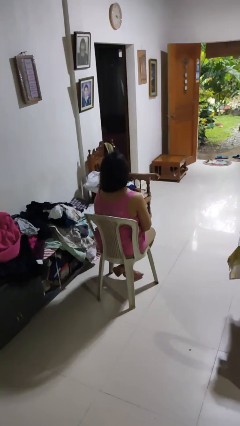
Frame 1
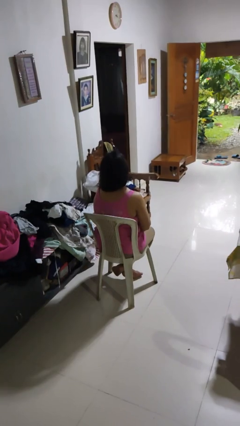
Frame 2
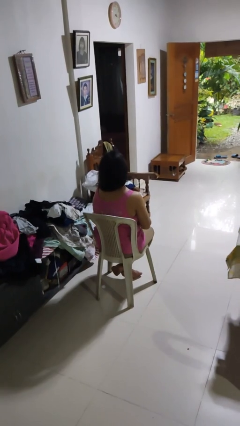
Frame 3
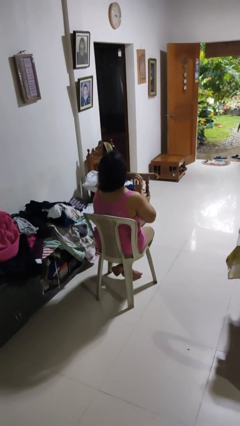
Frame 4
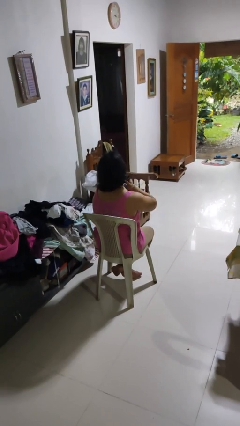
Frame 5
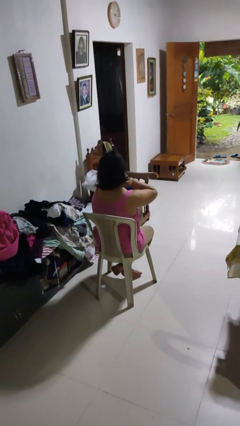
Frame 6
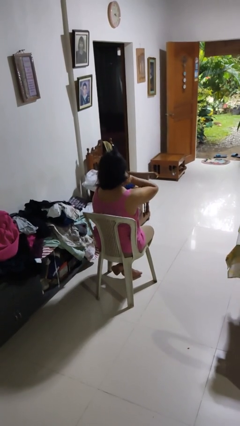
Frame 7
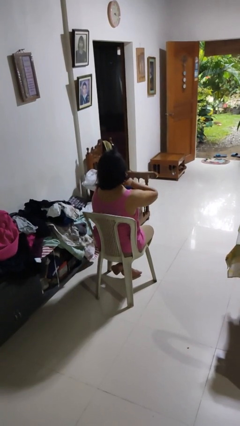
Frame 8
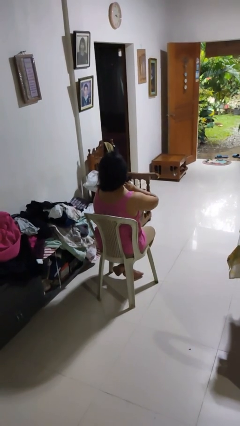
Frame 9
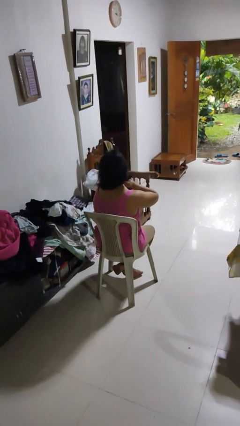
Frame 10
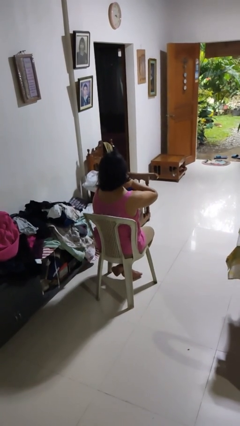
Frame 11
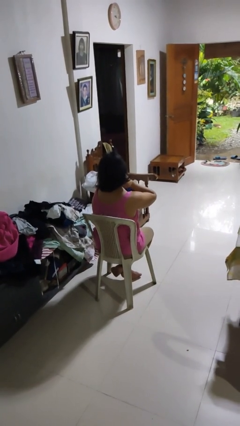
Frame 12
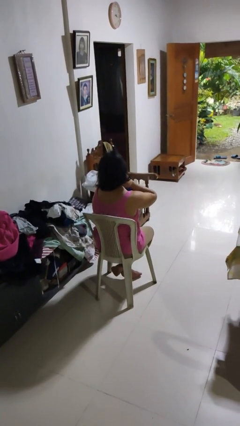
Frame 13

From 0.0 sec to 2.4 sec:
person rubs neck

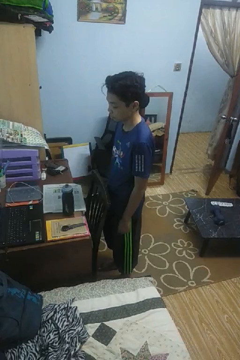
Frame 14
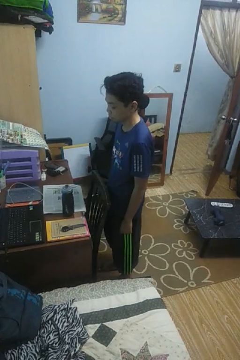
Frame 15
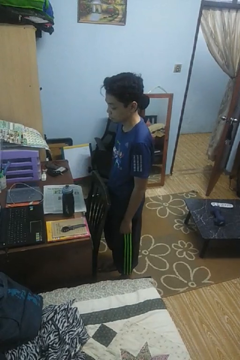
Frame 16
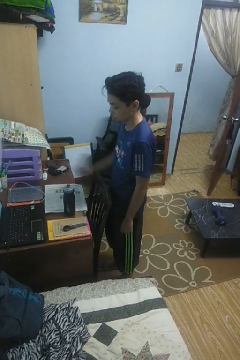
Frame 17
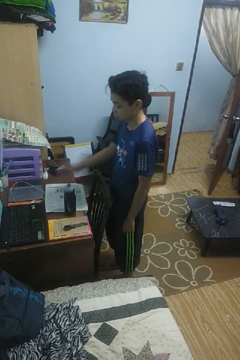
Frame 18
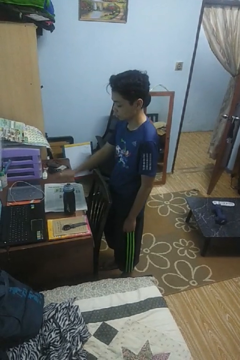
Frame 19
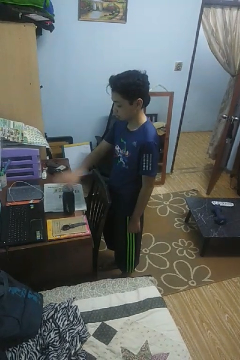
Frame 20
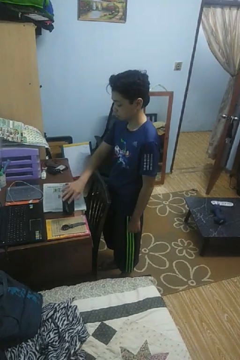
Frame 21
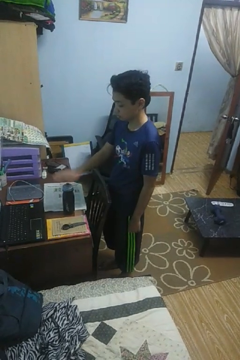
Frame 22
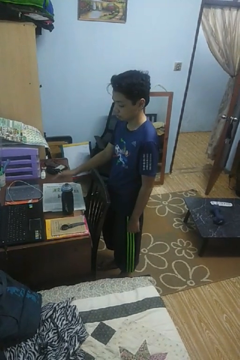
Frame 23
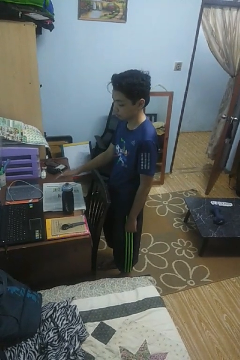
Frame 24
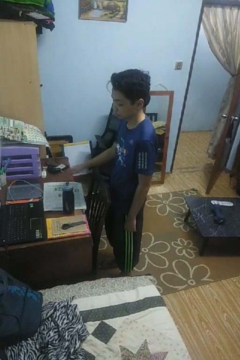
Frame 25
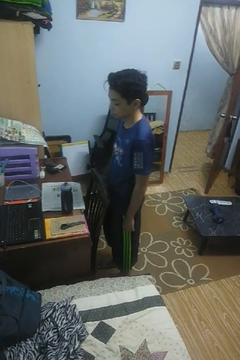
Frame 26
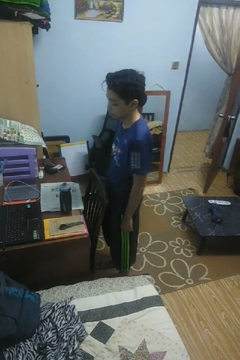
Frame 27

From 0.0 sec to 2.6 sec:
person waves hand over object

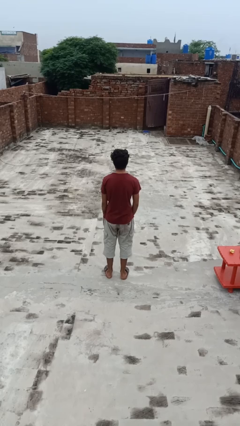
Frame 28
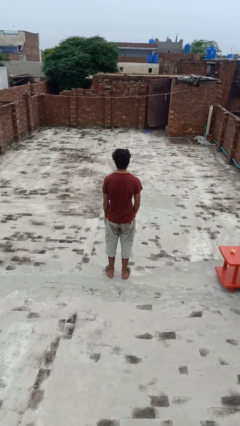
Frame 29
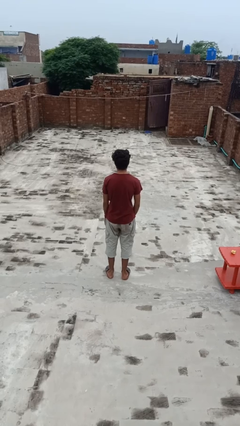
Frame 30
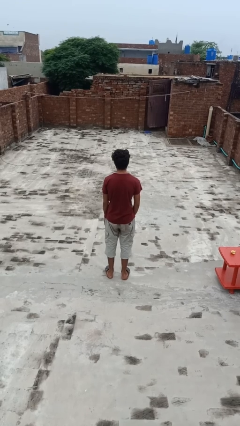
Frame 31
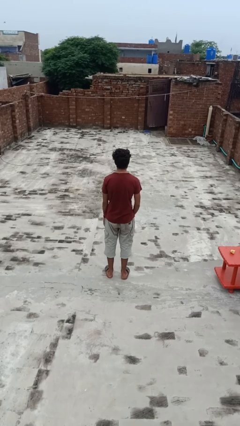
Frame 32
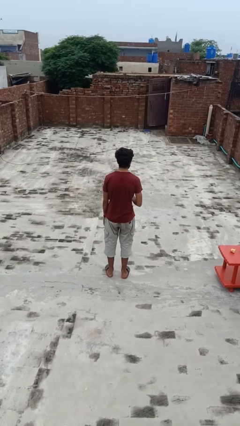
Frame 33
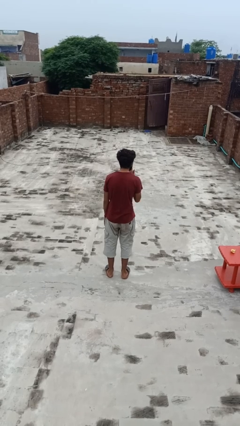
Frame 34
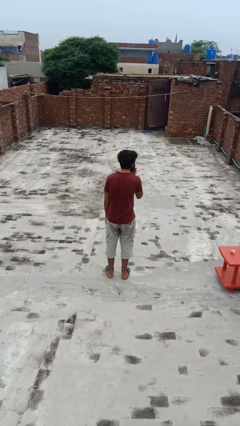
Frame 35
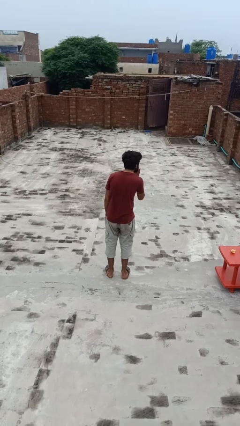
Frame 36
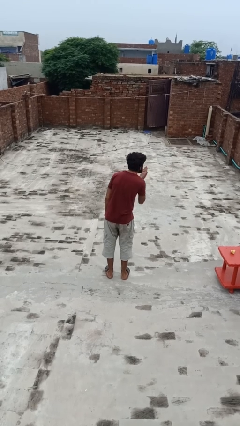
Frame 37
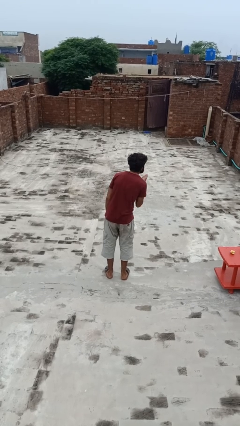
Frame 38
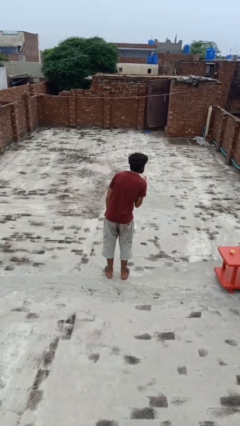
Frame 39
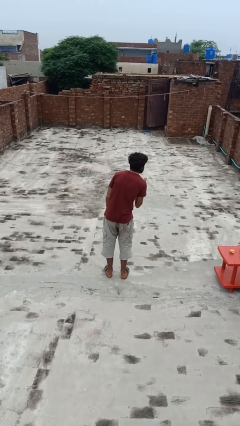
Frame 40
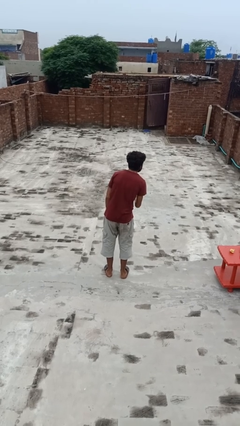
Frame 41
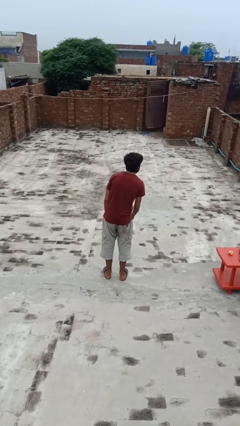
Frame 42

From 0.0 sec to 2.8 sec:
person gestures blow kiss

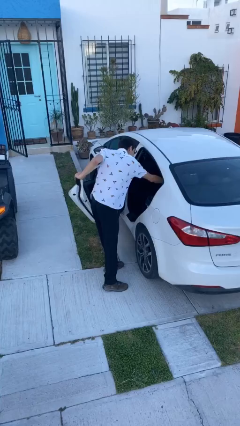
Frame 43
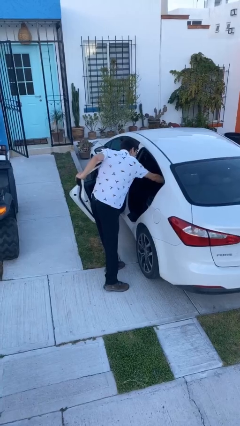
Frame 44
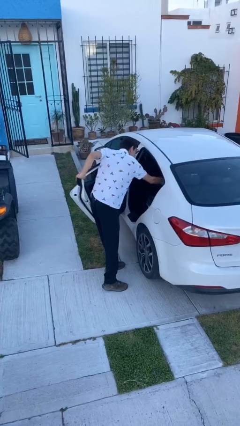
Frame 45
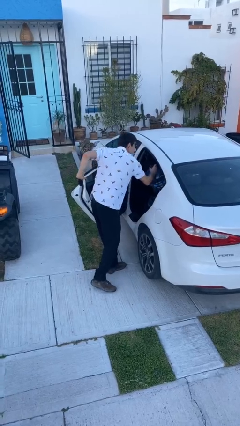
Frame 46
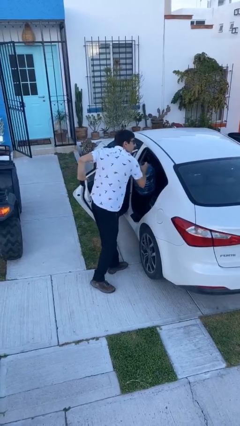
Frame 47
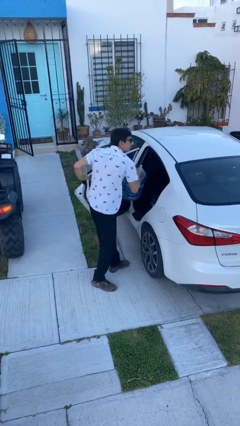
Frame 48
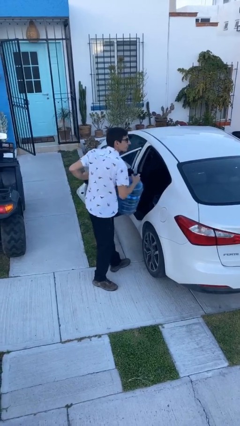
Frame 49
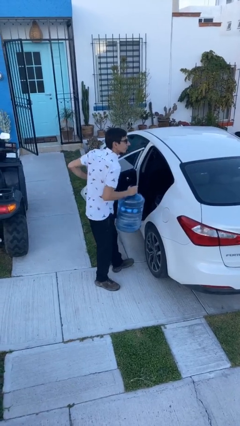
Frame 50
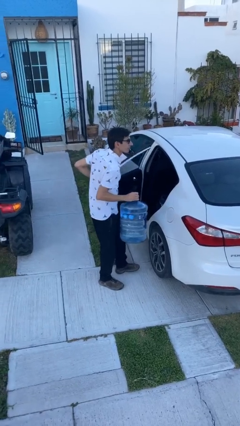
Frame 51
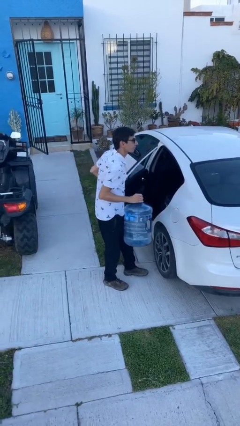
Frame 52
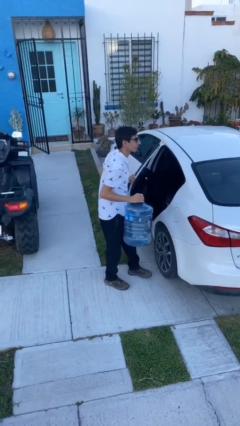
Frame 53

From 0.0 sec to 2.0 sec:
person unloads car

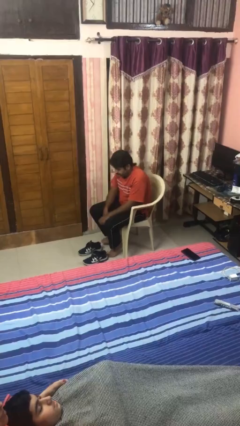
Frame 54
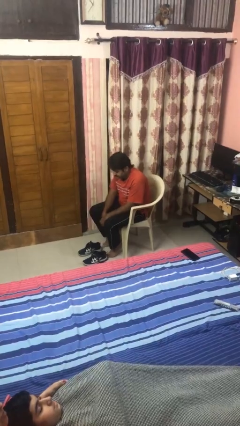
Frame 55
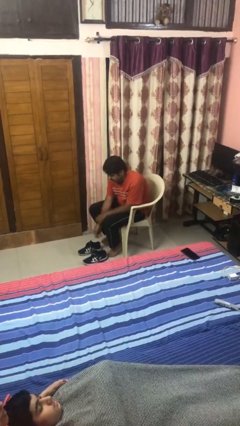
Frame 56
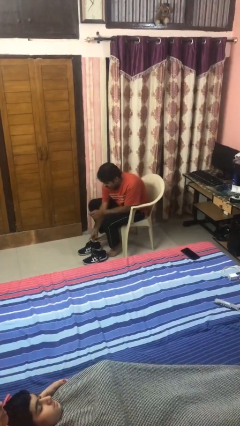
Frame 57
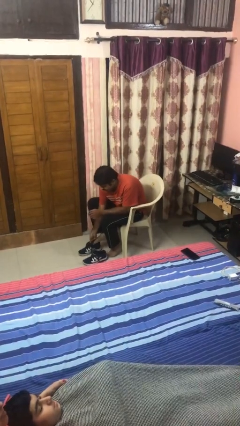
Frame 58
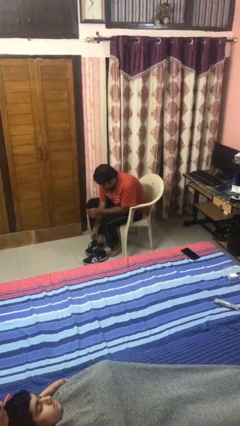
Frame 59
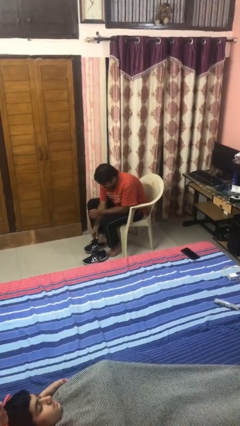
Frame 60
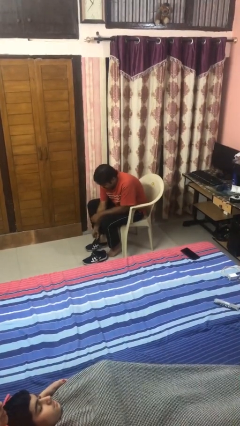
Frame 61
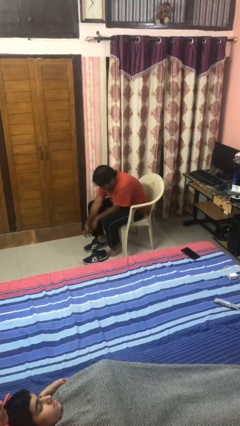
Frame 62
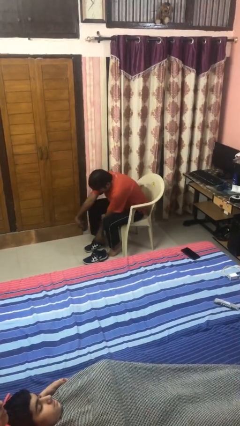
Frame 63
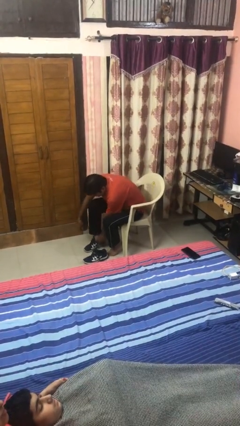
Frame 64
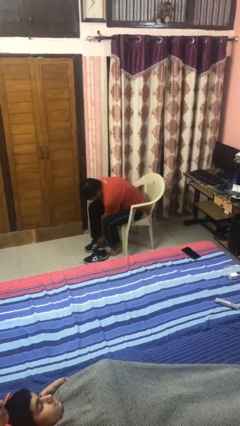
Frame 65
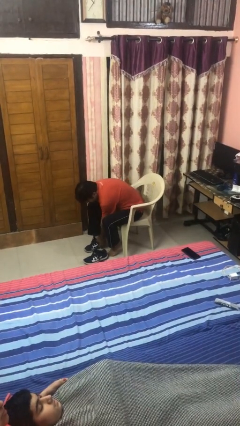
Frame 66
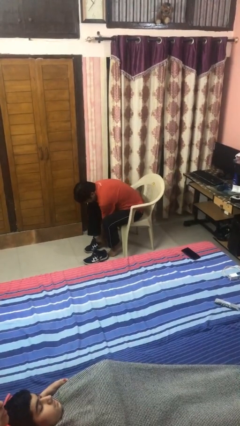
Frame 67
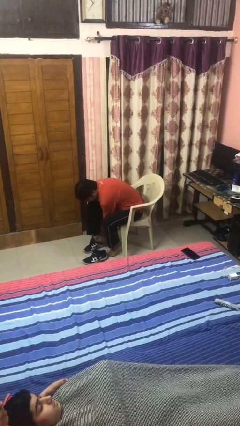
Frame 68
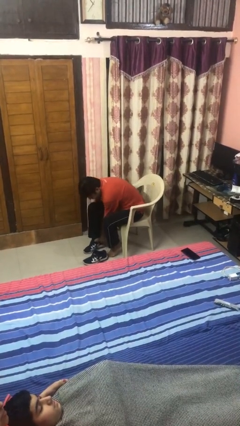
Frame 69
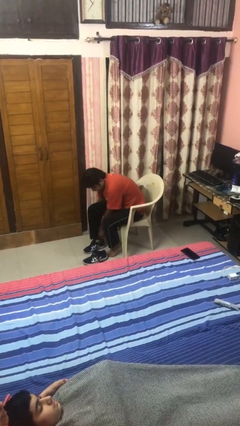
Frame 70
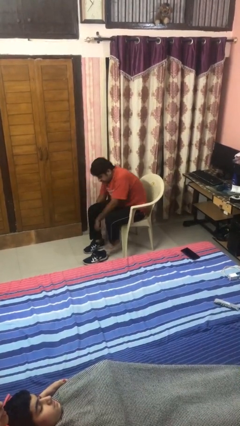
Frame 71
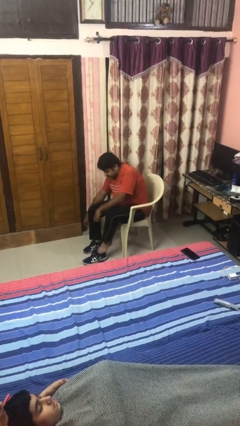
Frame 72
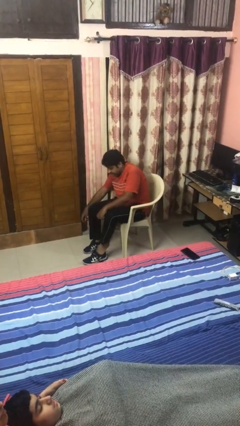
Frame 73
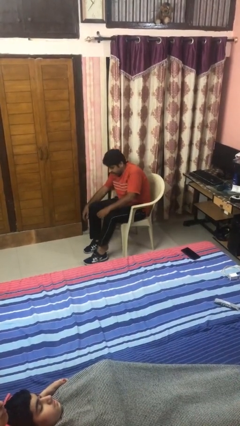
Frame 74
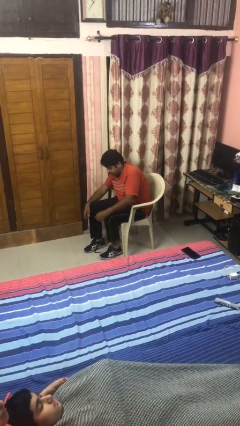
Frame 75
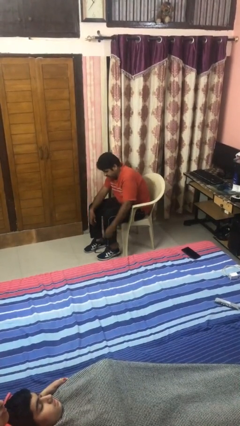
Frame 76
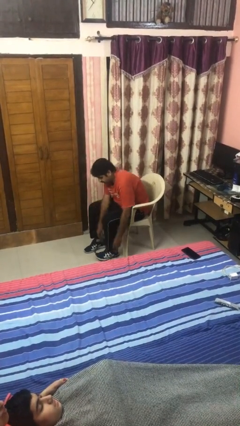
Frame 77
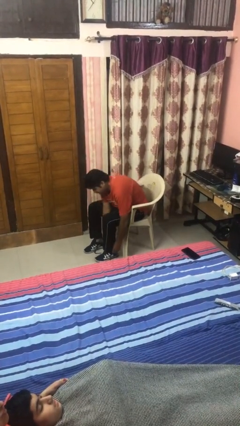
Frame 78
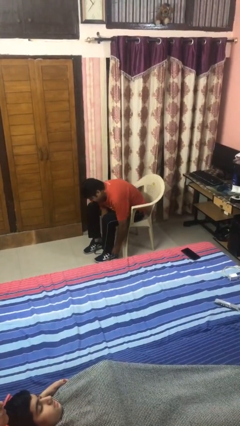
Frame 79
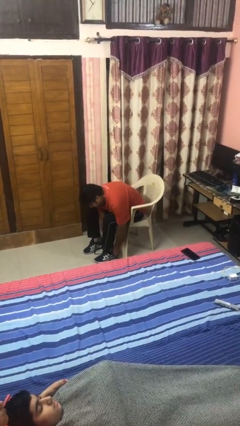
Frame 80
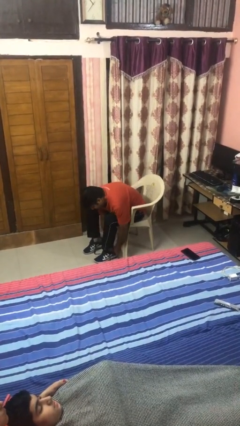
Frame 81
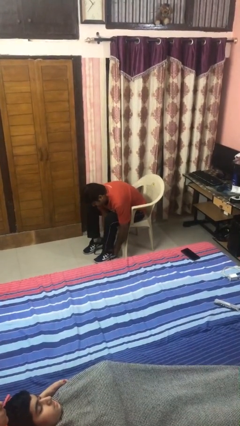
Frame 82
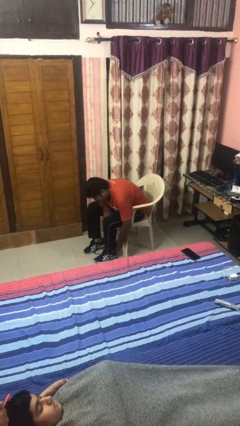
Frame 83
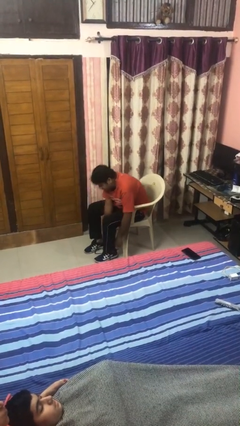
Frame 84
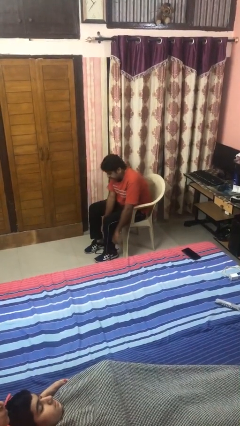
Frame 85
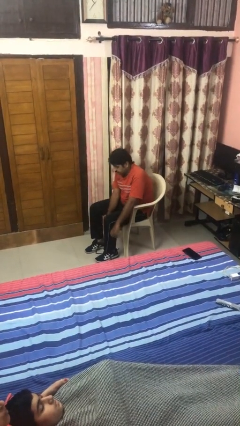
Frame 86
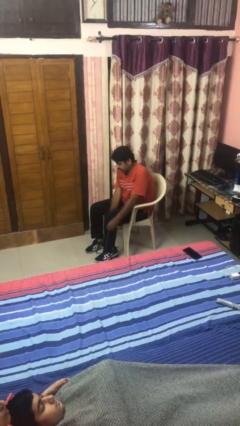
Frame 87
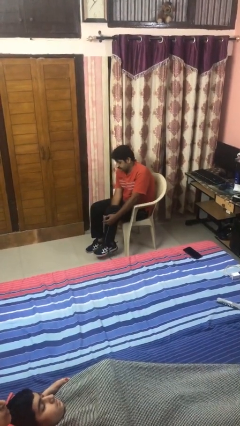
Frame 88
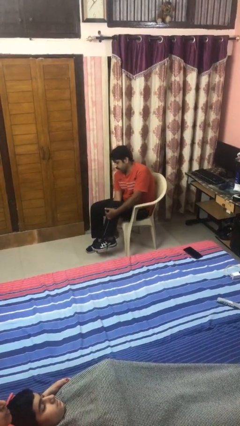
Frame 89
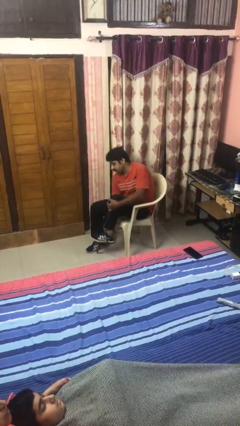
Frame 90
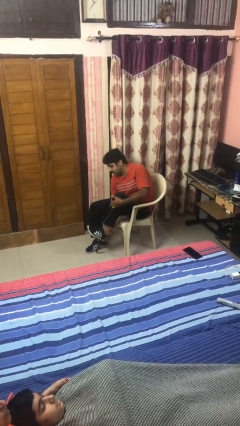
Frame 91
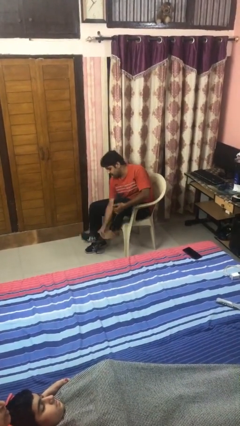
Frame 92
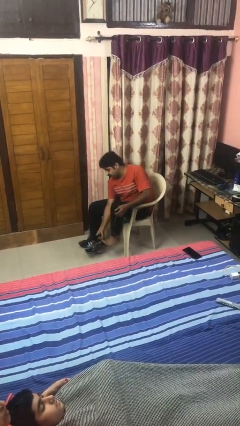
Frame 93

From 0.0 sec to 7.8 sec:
person puts on boots

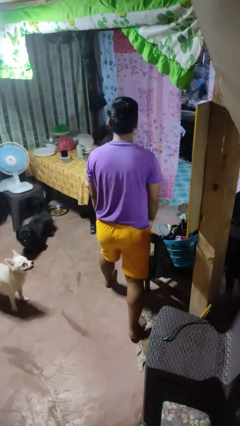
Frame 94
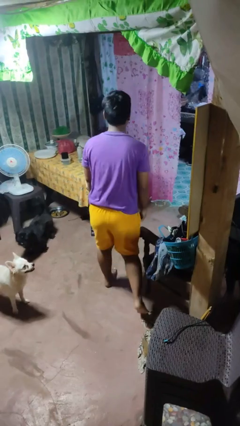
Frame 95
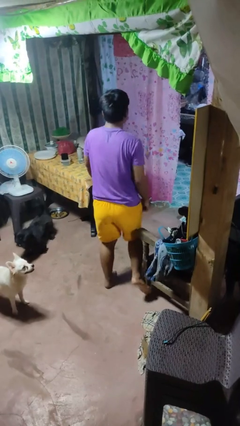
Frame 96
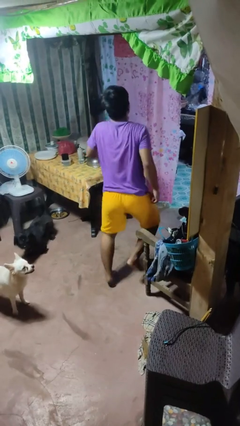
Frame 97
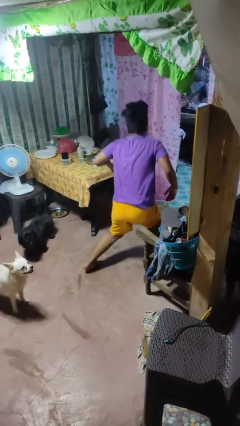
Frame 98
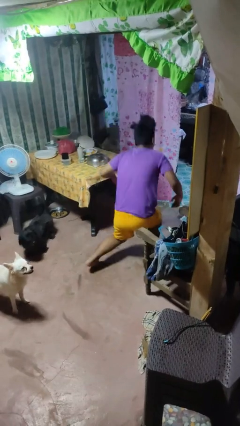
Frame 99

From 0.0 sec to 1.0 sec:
person trips on object on floor
